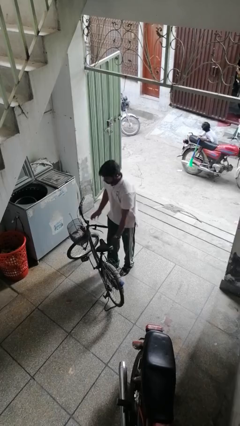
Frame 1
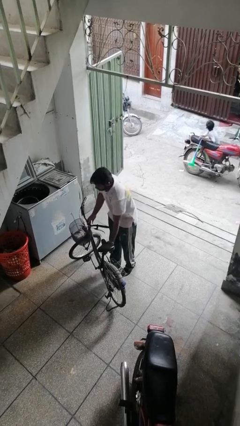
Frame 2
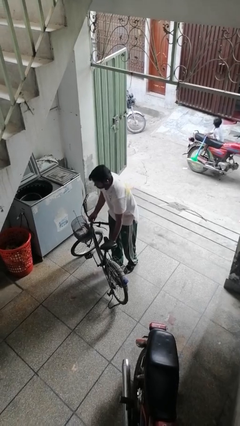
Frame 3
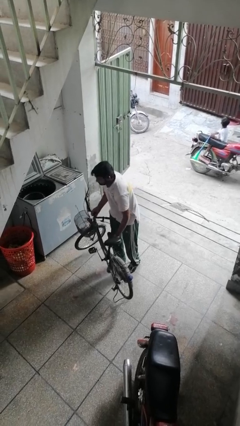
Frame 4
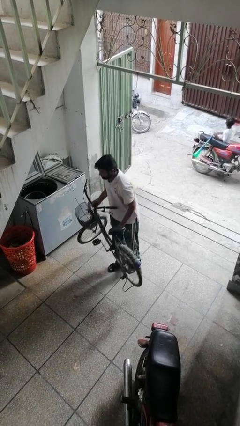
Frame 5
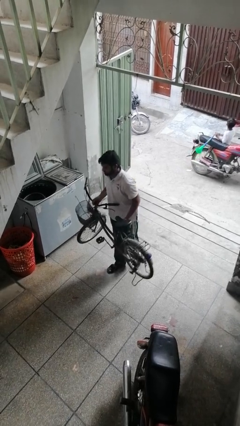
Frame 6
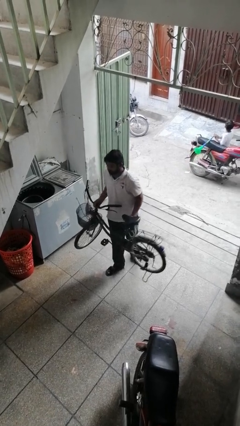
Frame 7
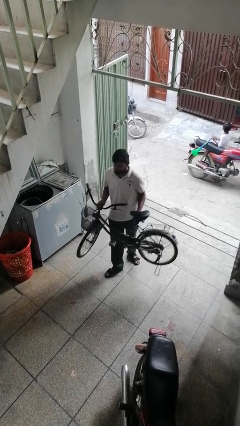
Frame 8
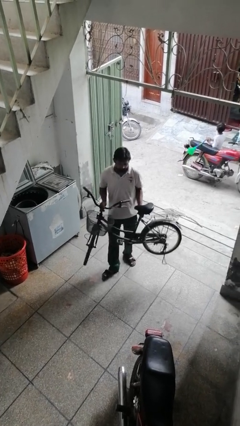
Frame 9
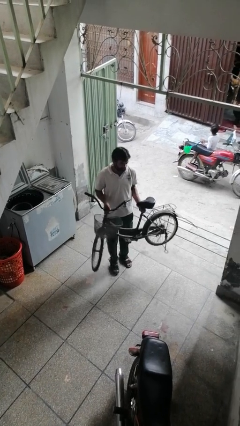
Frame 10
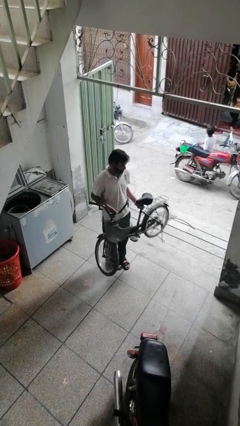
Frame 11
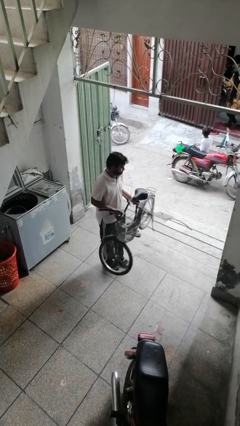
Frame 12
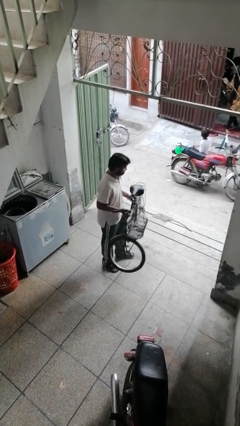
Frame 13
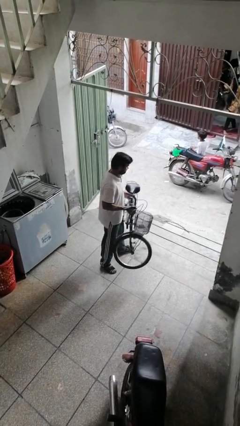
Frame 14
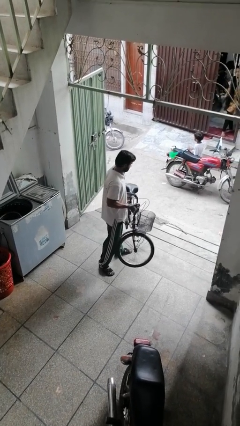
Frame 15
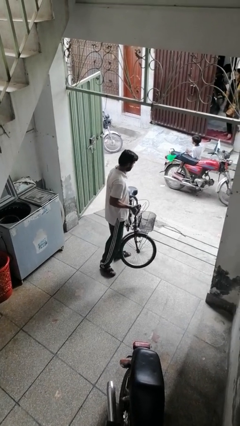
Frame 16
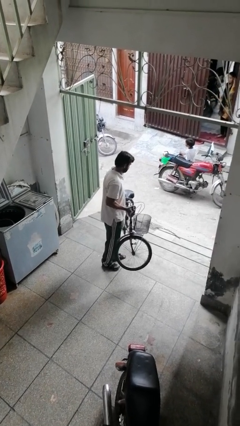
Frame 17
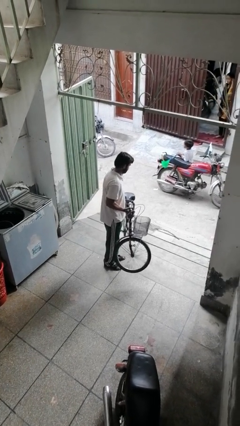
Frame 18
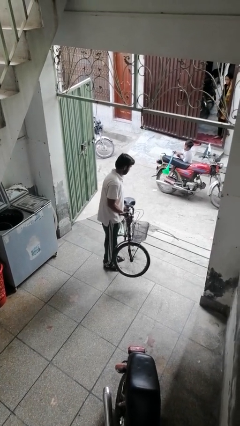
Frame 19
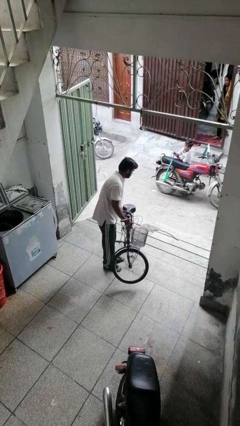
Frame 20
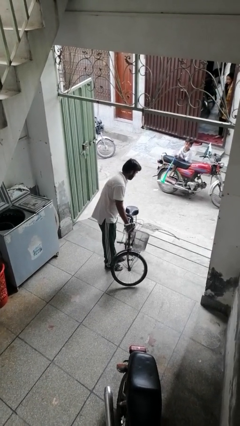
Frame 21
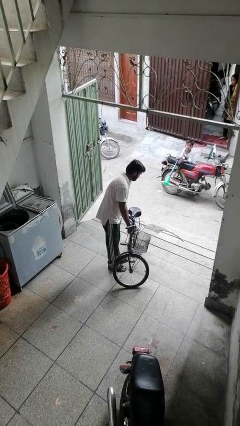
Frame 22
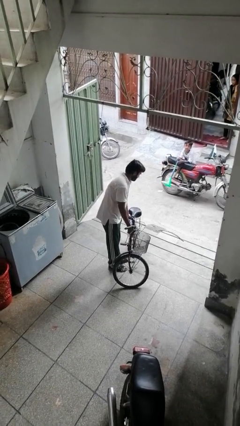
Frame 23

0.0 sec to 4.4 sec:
person carries bicycle

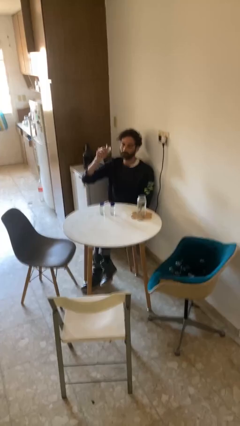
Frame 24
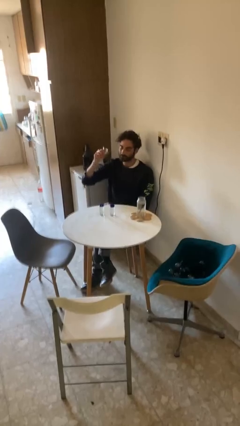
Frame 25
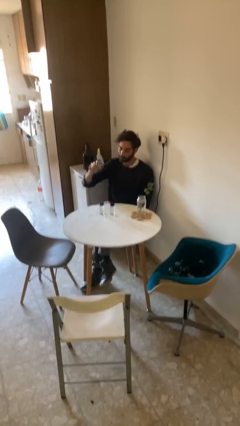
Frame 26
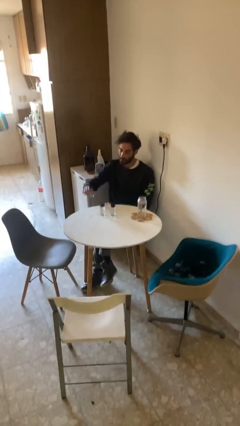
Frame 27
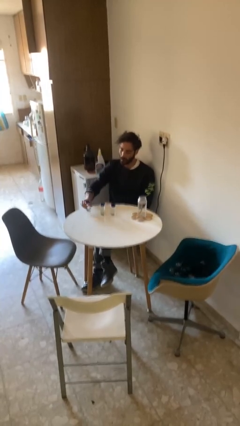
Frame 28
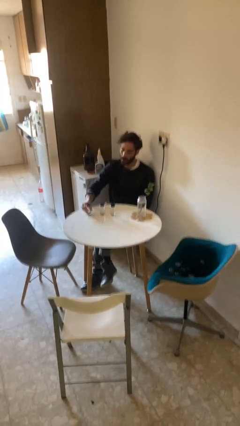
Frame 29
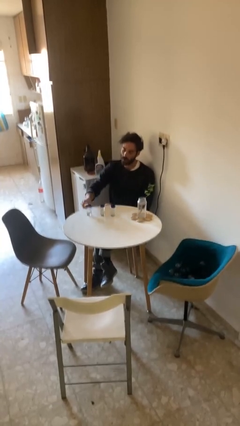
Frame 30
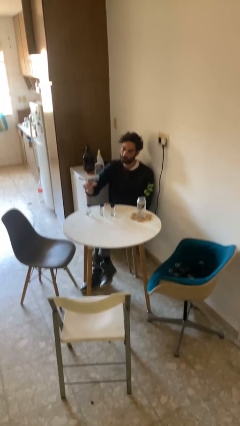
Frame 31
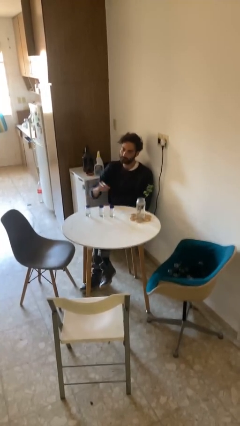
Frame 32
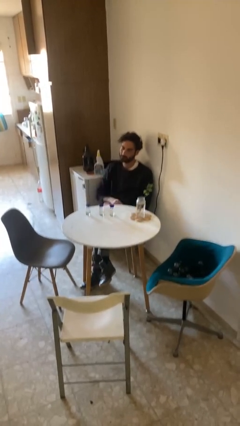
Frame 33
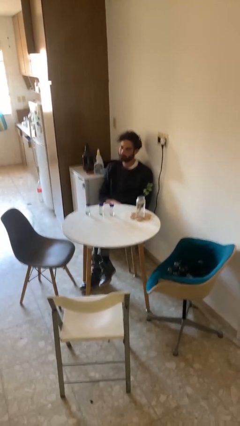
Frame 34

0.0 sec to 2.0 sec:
person puts down object on table

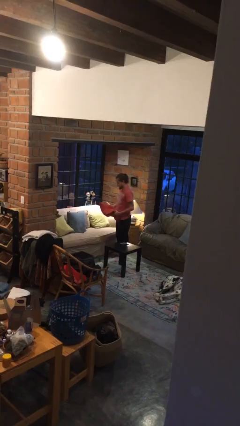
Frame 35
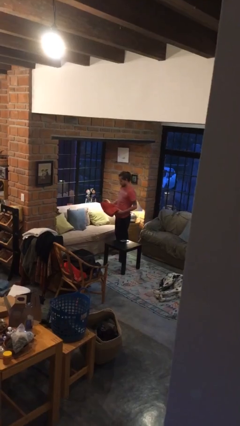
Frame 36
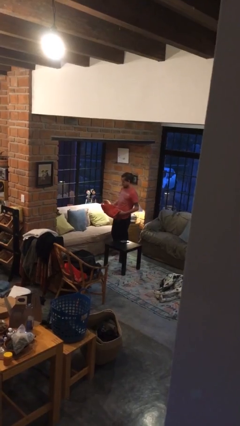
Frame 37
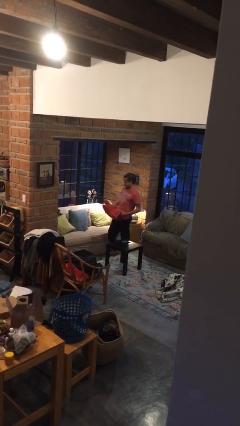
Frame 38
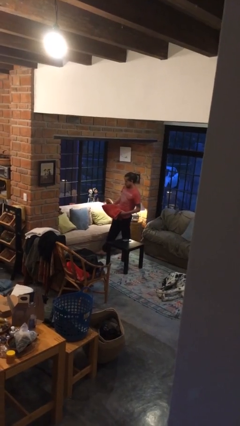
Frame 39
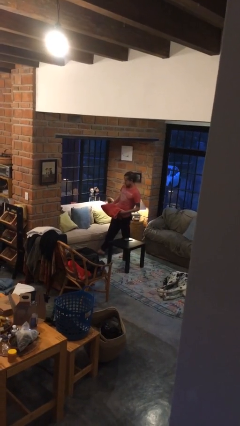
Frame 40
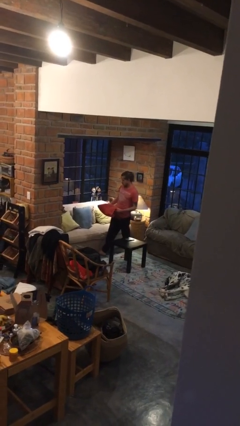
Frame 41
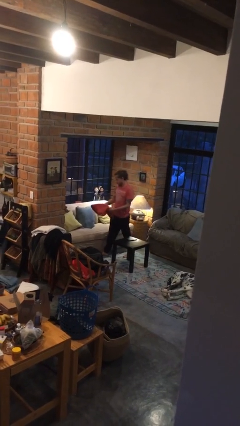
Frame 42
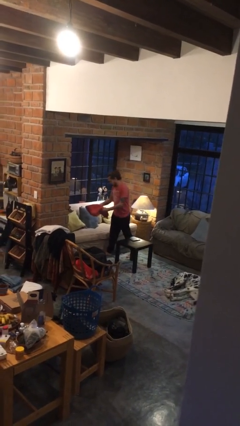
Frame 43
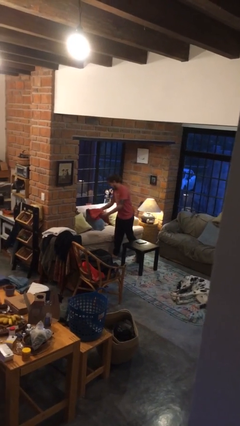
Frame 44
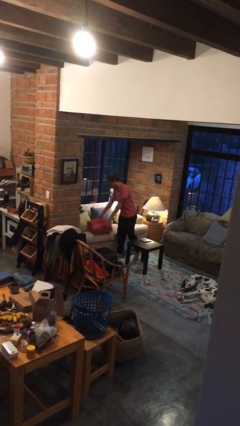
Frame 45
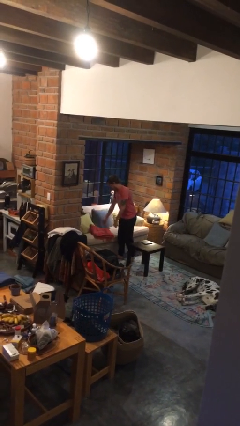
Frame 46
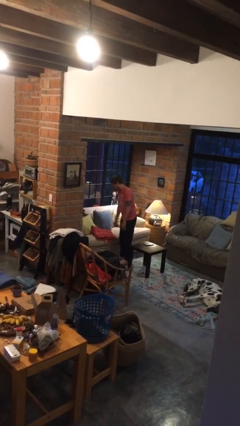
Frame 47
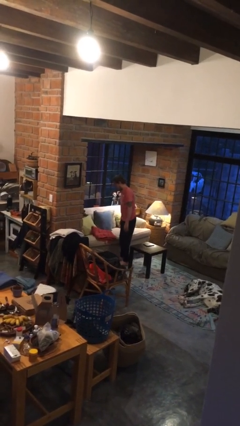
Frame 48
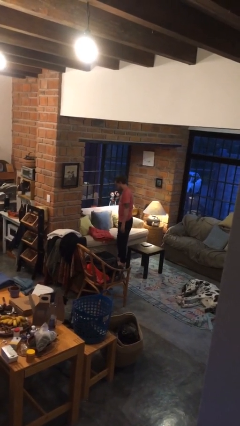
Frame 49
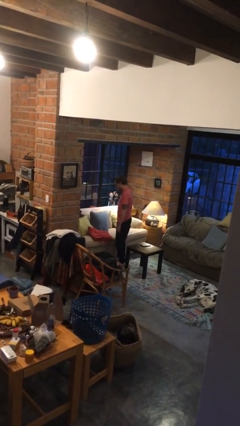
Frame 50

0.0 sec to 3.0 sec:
person puts down object on couch

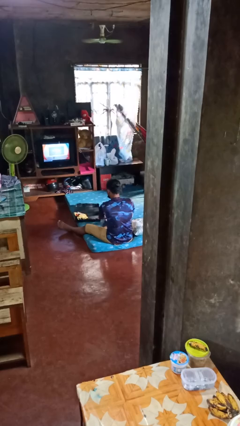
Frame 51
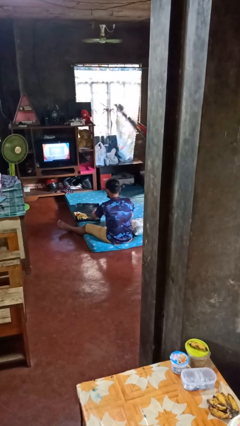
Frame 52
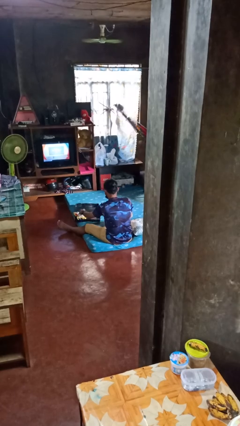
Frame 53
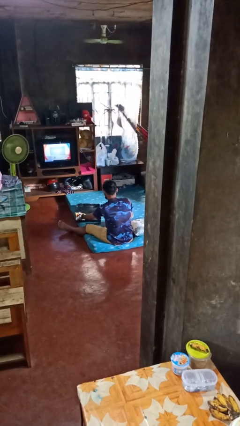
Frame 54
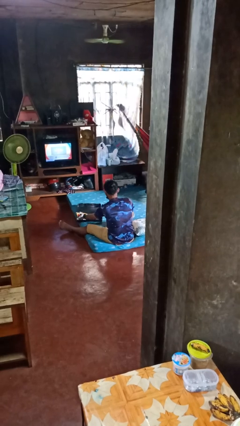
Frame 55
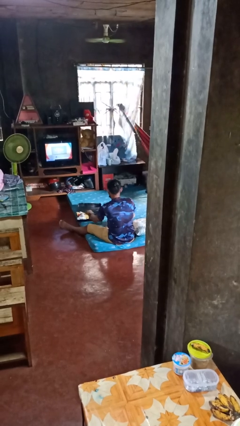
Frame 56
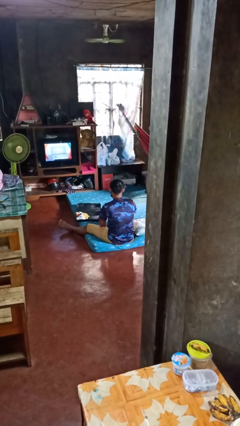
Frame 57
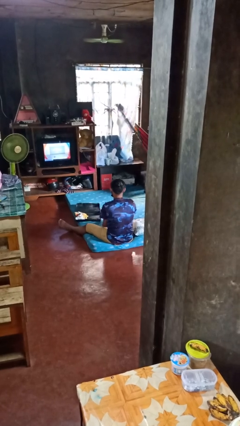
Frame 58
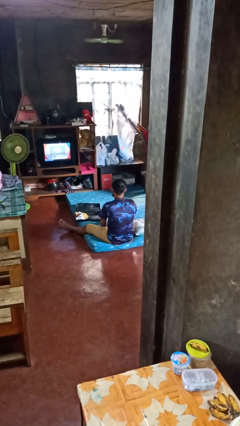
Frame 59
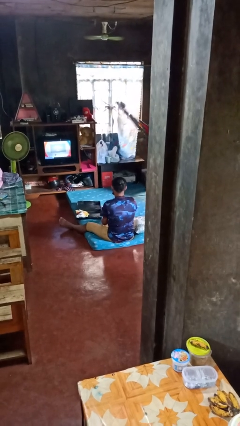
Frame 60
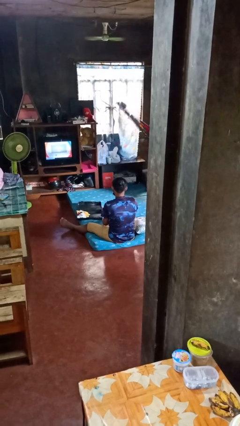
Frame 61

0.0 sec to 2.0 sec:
person loads clothes into suitcase

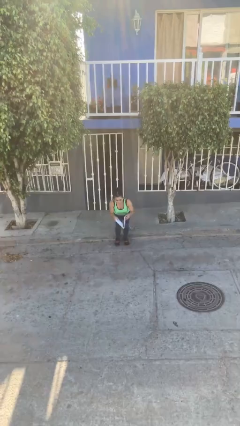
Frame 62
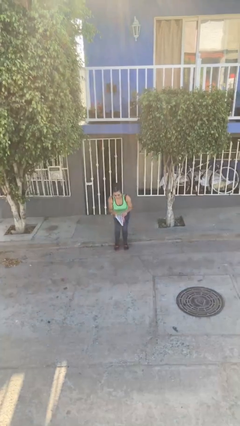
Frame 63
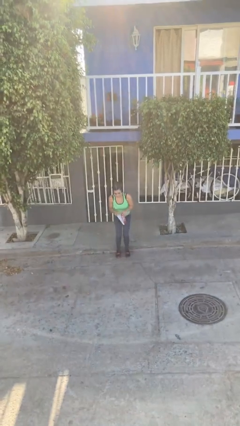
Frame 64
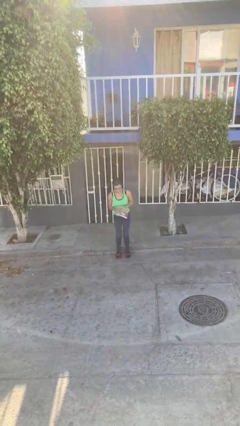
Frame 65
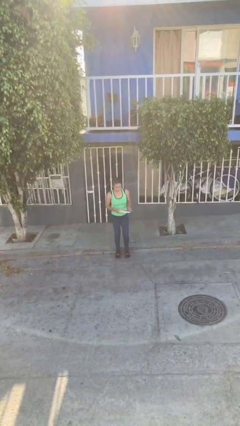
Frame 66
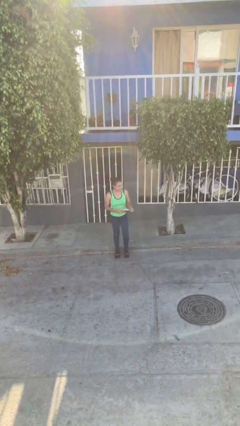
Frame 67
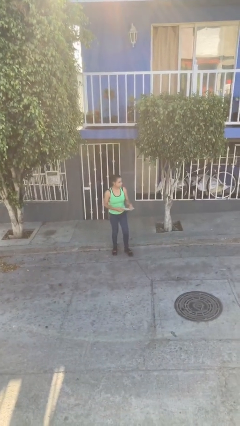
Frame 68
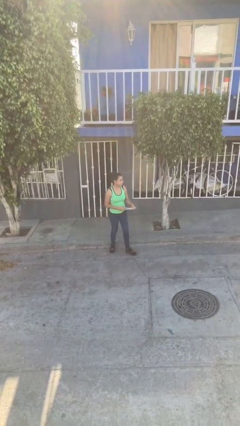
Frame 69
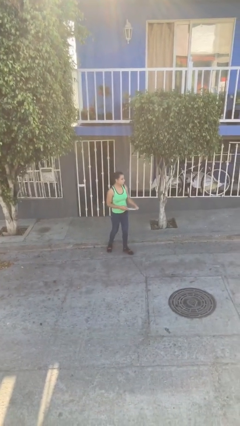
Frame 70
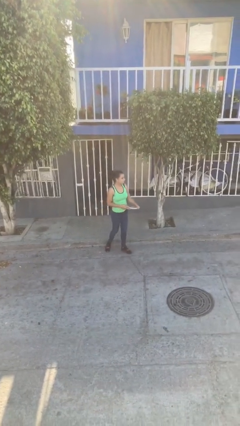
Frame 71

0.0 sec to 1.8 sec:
person stands up

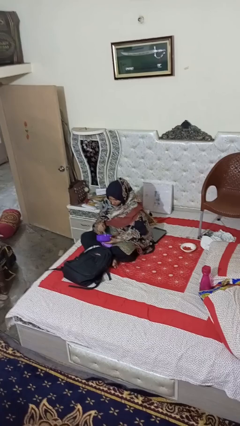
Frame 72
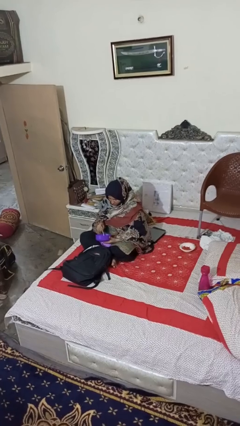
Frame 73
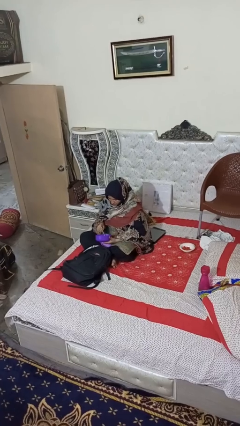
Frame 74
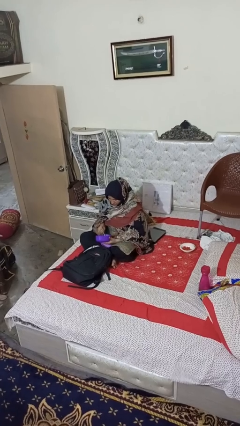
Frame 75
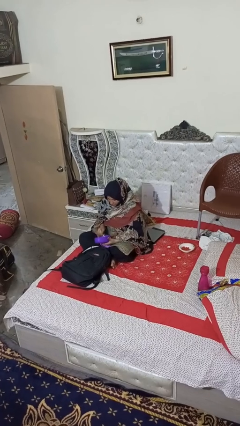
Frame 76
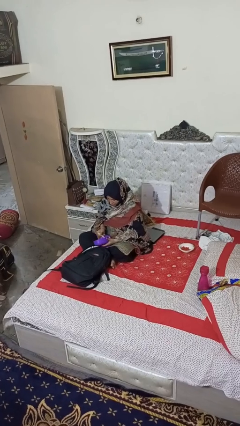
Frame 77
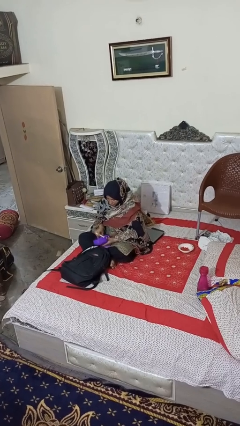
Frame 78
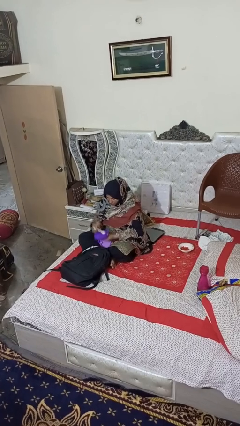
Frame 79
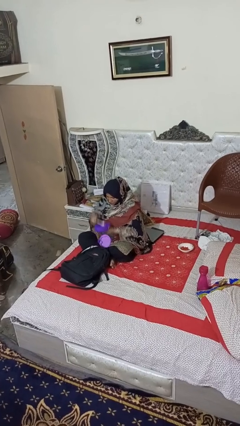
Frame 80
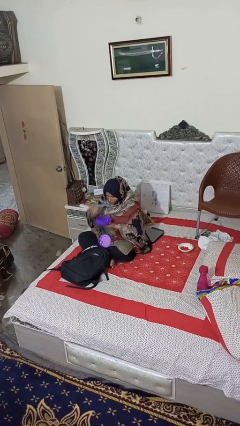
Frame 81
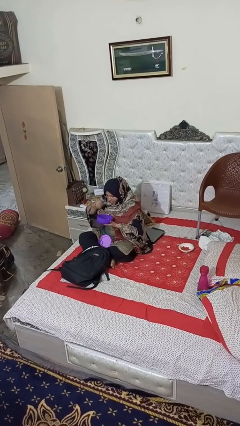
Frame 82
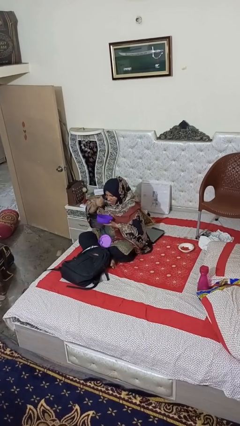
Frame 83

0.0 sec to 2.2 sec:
person eats snack from bag

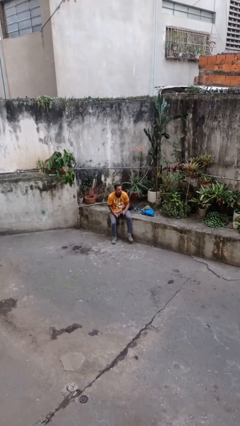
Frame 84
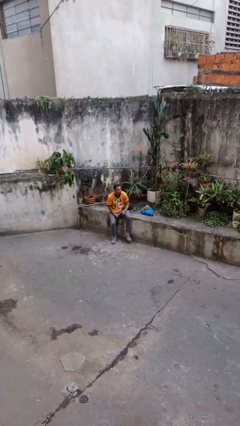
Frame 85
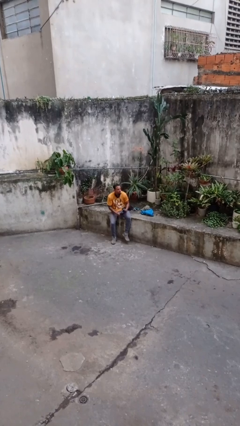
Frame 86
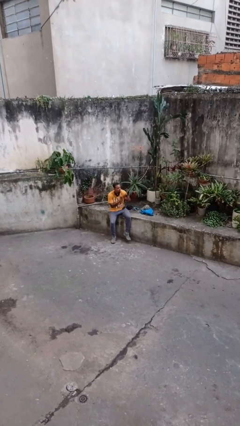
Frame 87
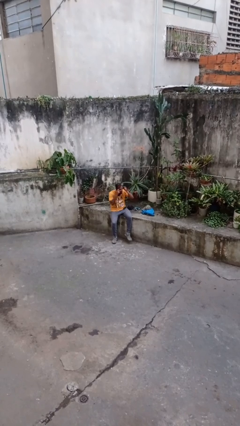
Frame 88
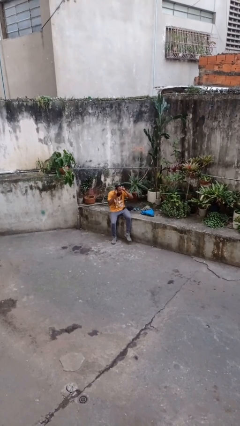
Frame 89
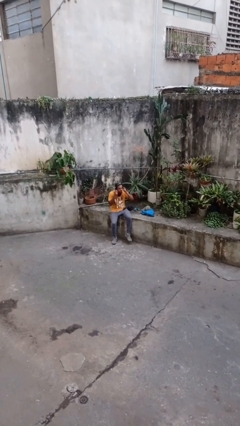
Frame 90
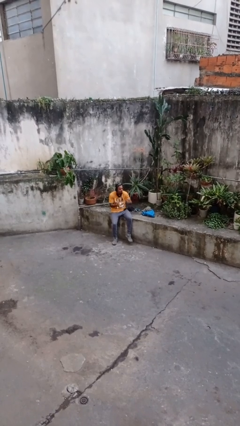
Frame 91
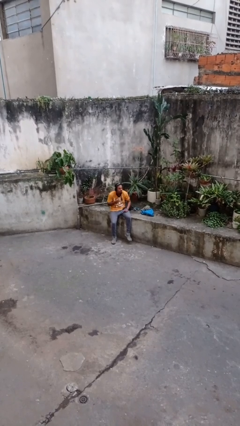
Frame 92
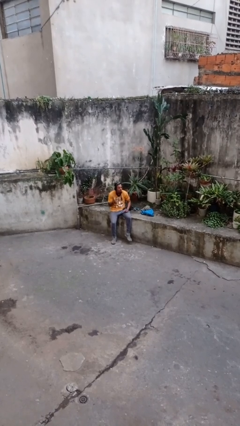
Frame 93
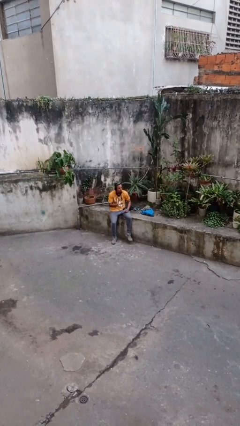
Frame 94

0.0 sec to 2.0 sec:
person puts on headphones
